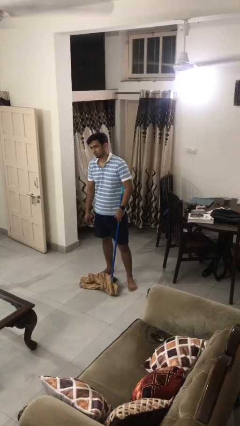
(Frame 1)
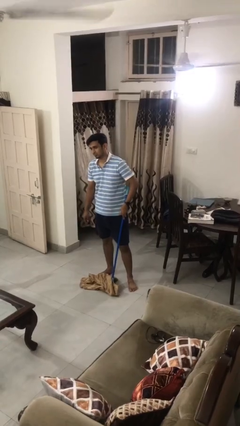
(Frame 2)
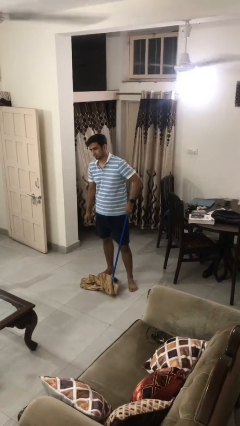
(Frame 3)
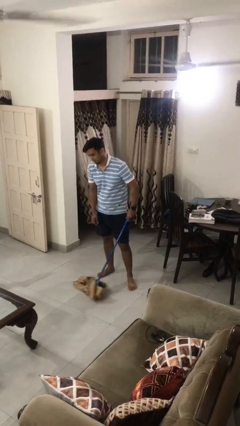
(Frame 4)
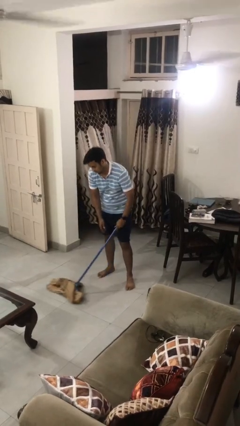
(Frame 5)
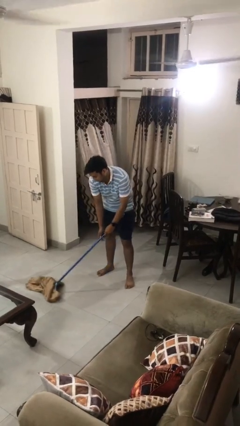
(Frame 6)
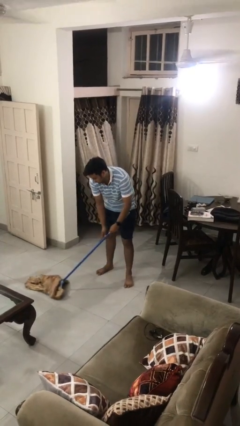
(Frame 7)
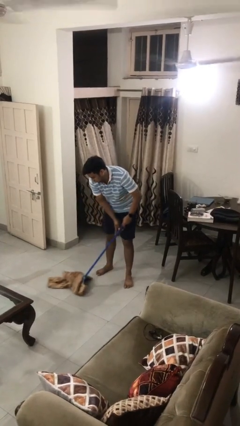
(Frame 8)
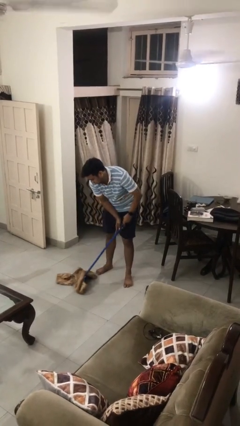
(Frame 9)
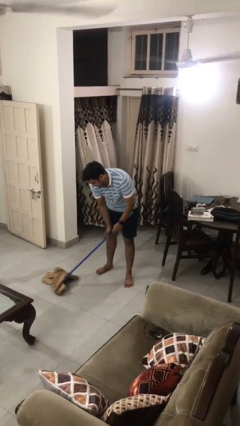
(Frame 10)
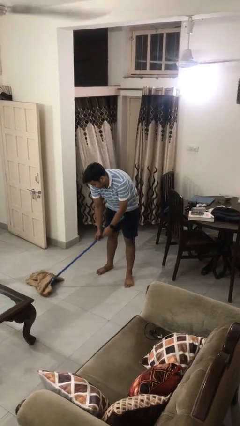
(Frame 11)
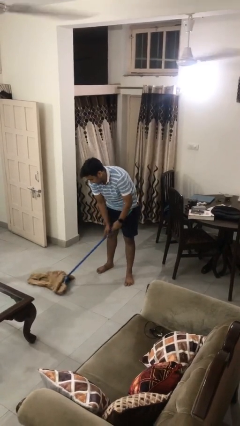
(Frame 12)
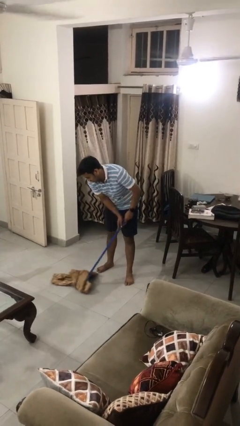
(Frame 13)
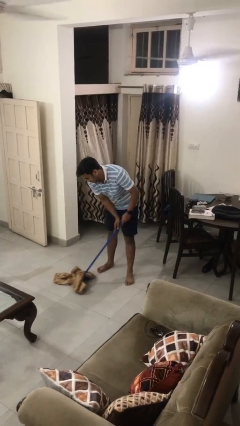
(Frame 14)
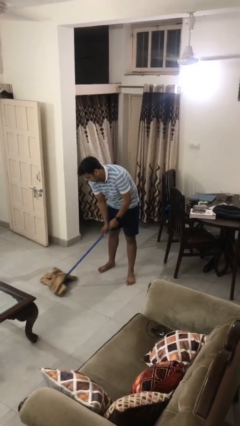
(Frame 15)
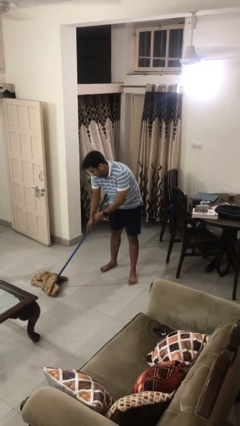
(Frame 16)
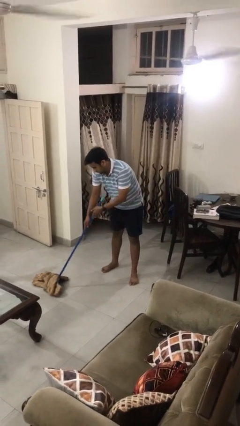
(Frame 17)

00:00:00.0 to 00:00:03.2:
person mops

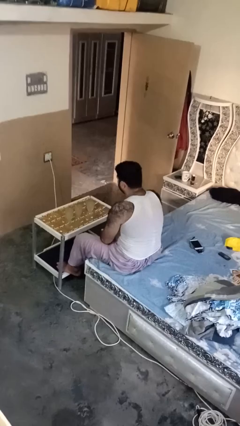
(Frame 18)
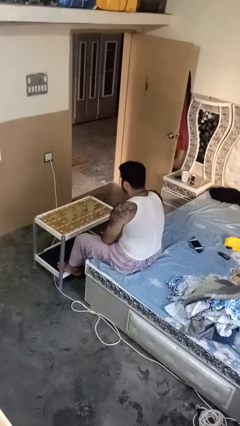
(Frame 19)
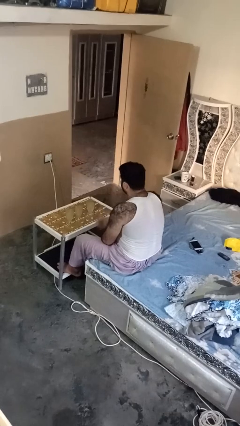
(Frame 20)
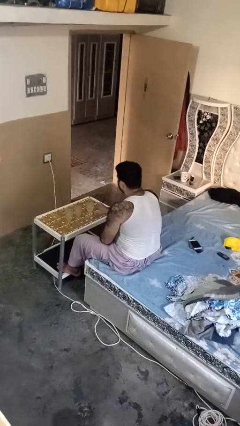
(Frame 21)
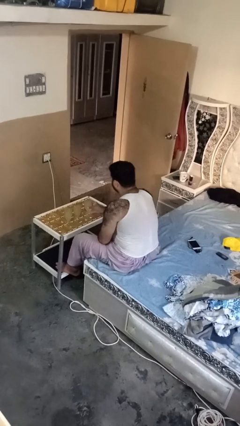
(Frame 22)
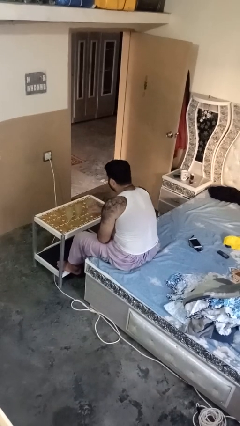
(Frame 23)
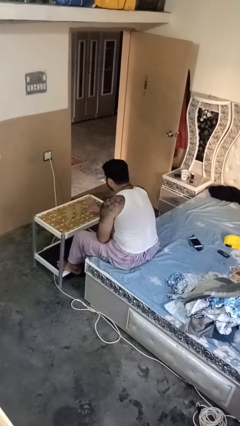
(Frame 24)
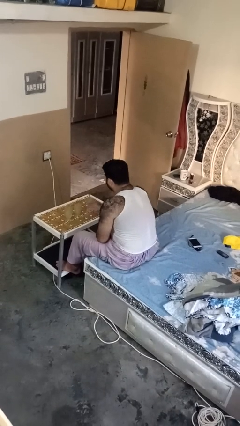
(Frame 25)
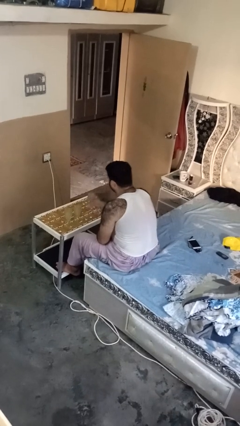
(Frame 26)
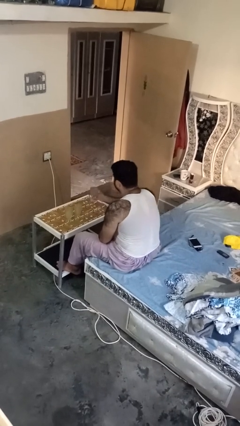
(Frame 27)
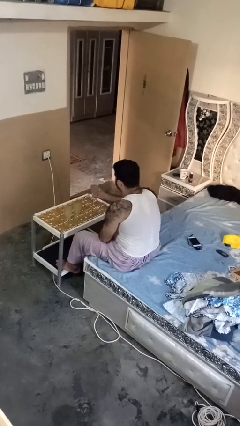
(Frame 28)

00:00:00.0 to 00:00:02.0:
person picks up object from table

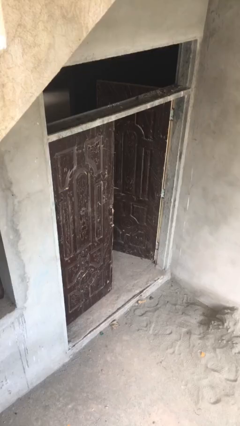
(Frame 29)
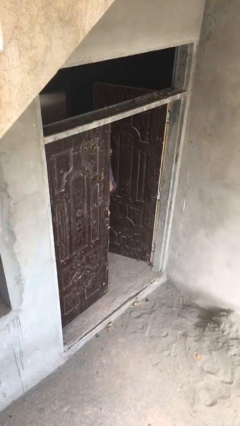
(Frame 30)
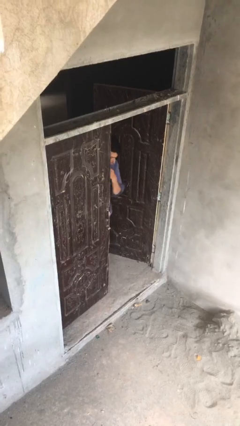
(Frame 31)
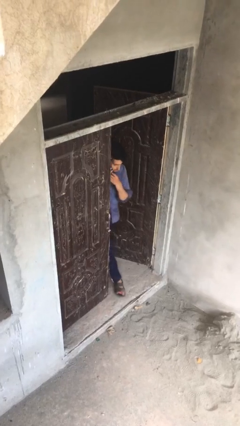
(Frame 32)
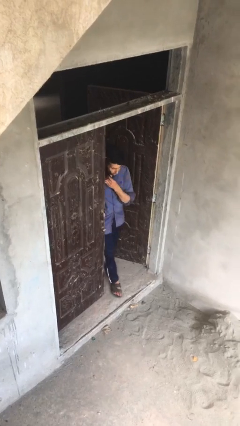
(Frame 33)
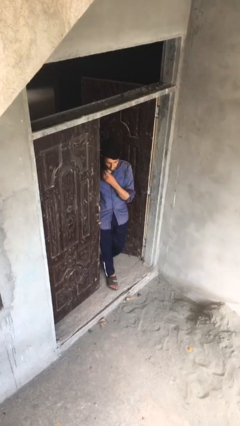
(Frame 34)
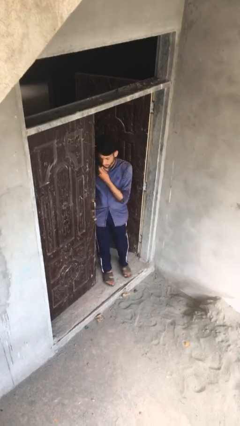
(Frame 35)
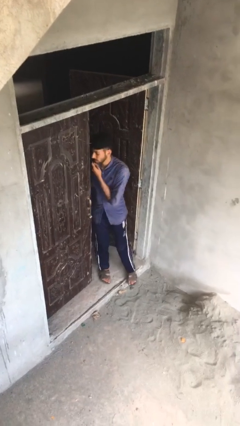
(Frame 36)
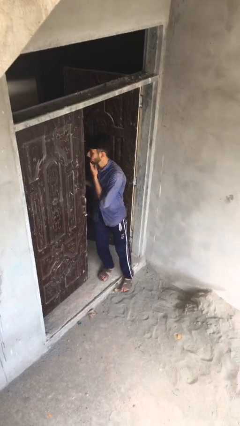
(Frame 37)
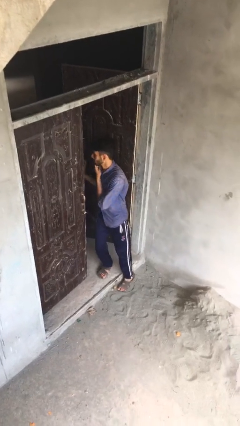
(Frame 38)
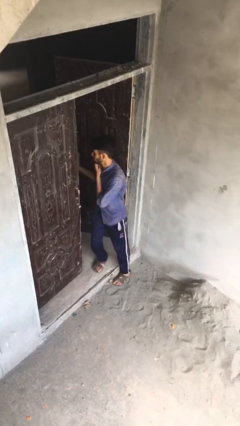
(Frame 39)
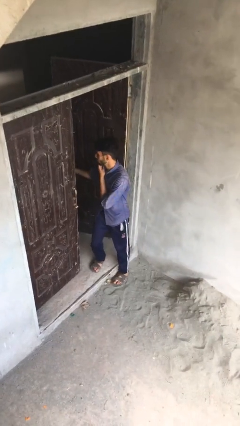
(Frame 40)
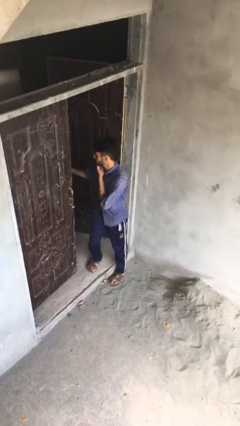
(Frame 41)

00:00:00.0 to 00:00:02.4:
person enters scene through structure

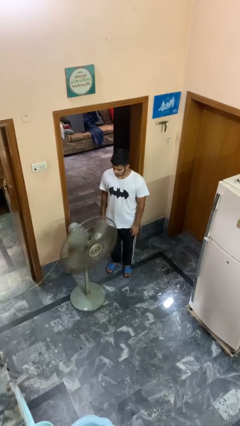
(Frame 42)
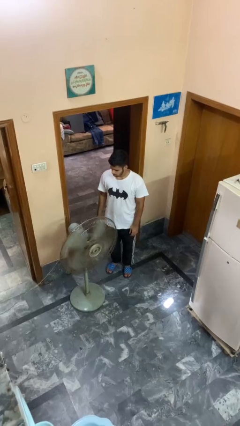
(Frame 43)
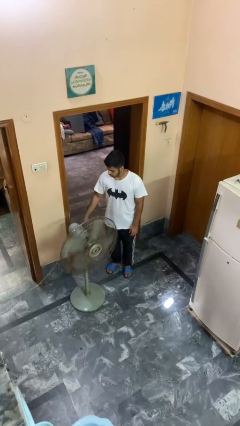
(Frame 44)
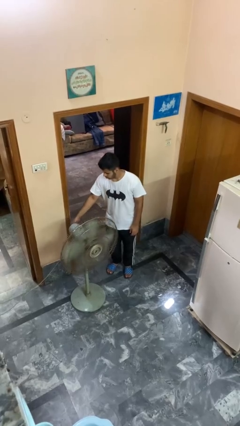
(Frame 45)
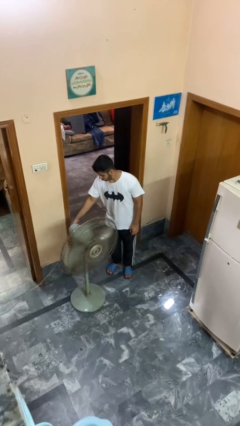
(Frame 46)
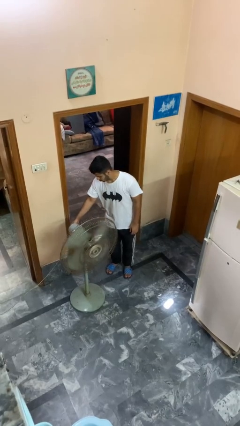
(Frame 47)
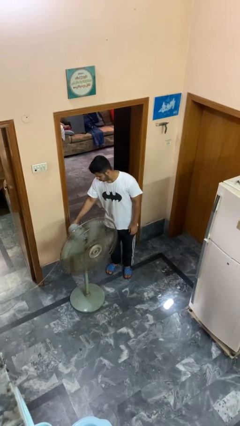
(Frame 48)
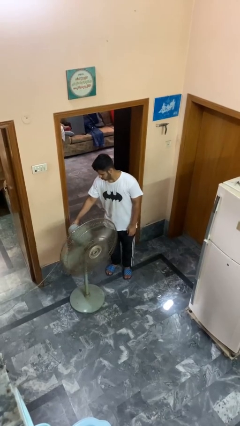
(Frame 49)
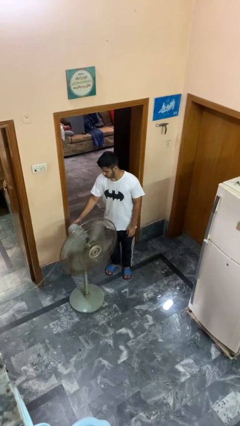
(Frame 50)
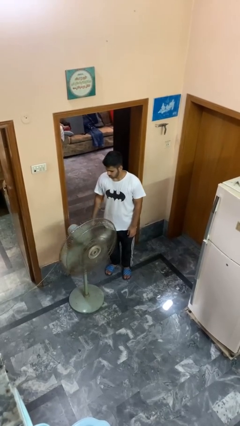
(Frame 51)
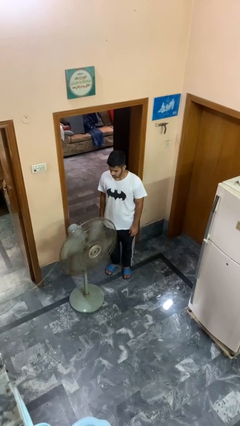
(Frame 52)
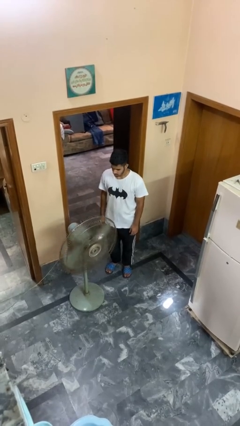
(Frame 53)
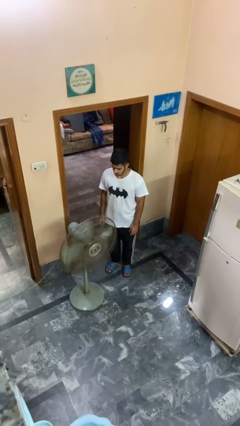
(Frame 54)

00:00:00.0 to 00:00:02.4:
person turns off fan

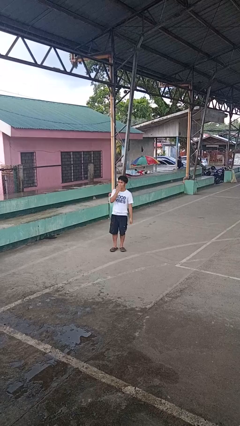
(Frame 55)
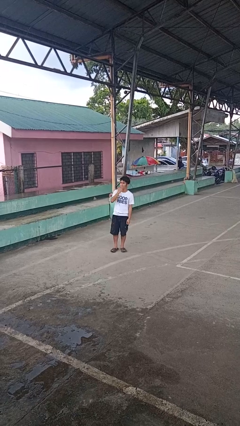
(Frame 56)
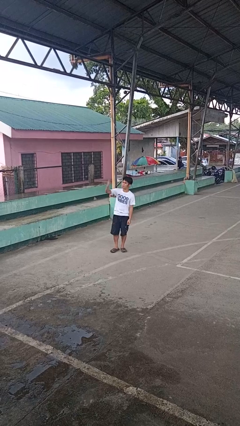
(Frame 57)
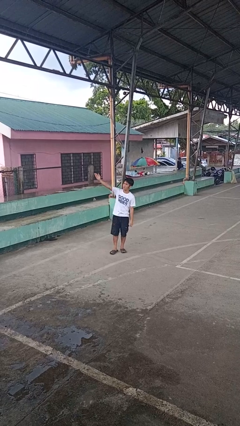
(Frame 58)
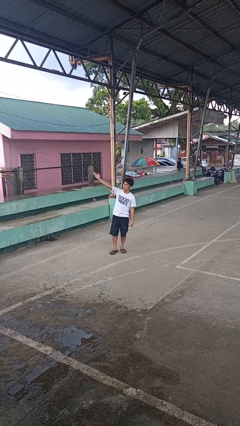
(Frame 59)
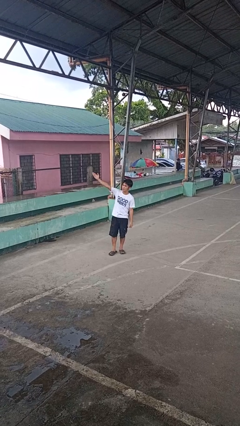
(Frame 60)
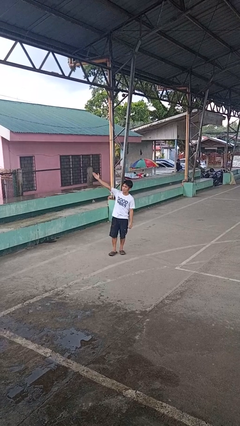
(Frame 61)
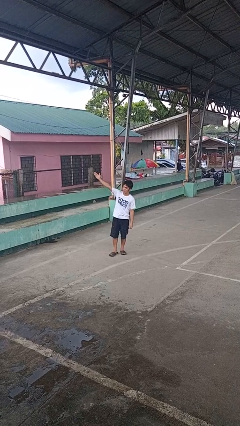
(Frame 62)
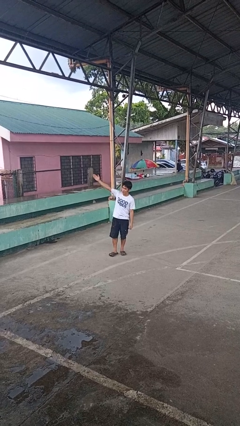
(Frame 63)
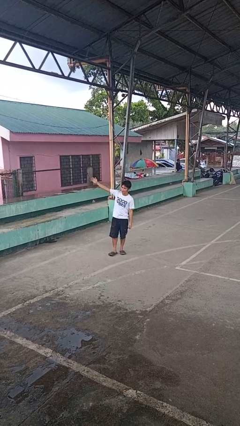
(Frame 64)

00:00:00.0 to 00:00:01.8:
person gestures blow kiss

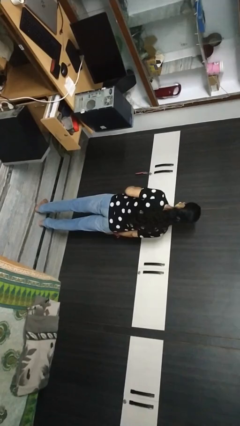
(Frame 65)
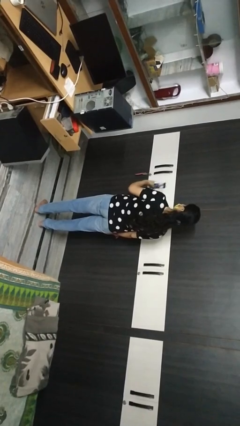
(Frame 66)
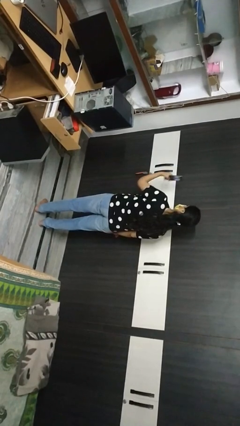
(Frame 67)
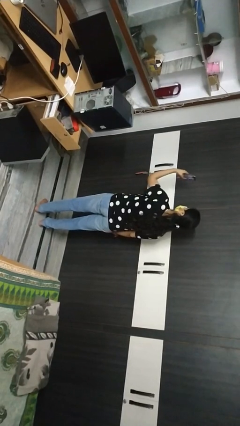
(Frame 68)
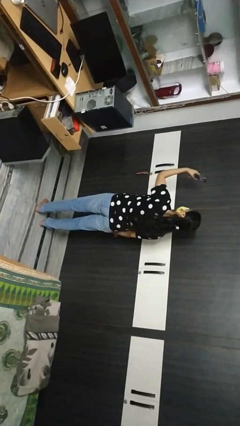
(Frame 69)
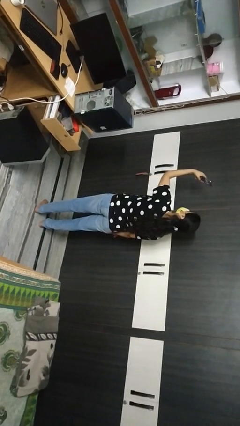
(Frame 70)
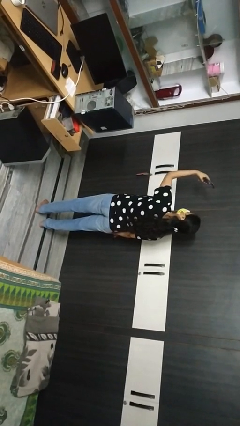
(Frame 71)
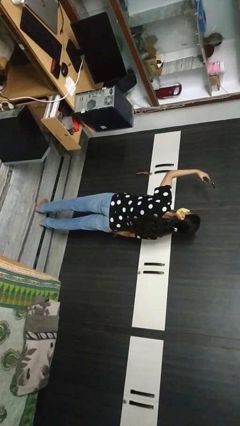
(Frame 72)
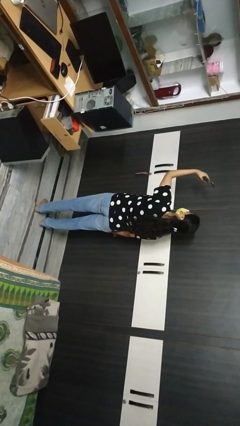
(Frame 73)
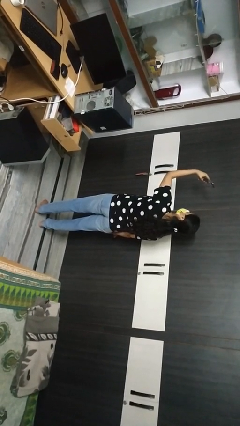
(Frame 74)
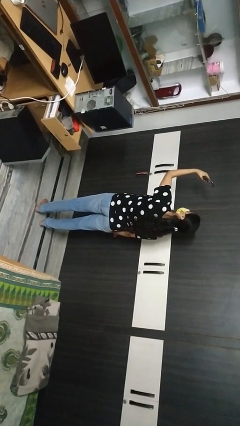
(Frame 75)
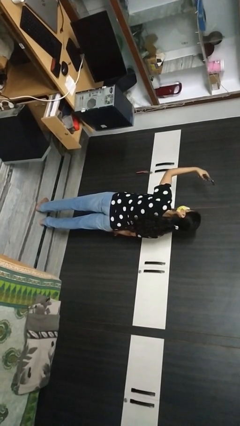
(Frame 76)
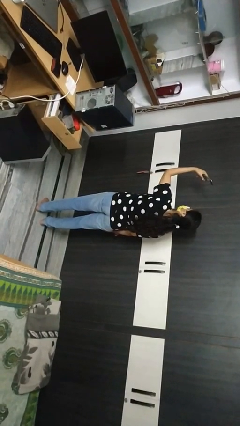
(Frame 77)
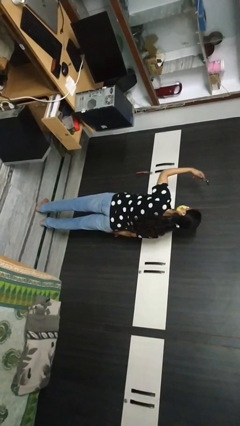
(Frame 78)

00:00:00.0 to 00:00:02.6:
person takes selfie

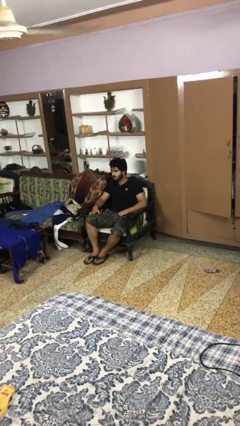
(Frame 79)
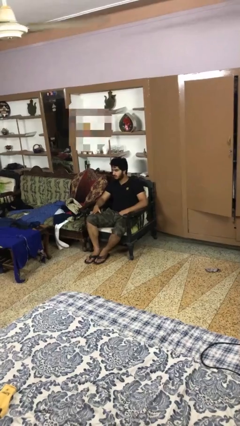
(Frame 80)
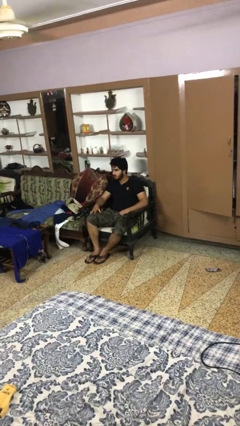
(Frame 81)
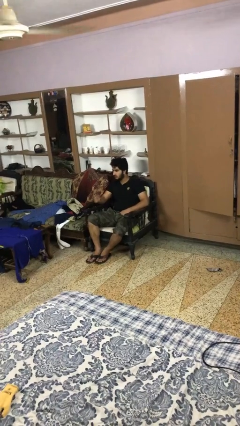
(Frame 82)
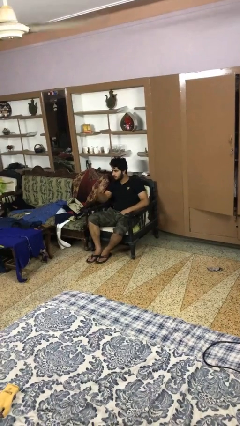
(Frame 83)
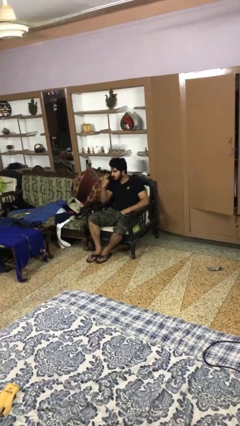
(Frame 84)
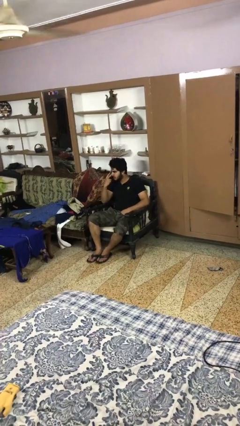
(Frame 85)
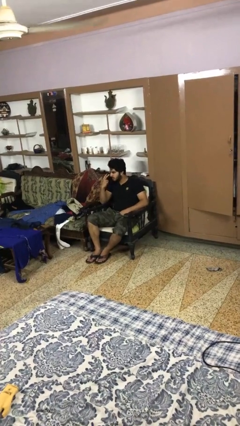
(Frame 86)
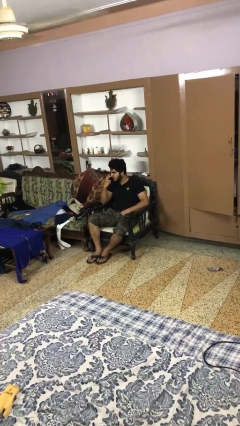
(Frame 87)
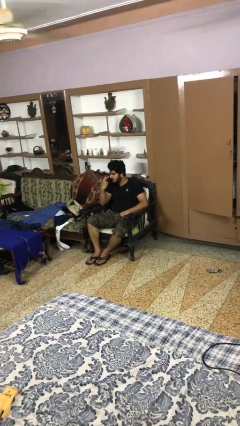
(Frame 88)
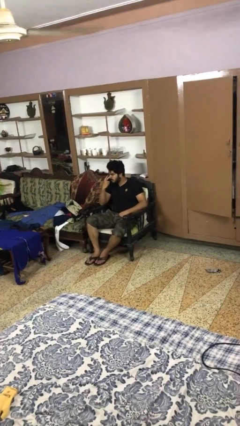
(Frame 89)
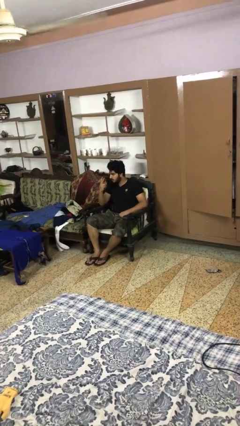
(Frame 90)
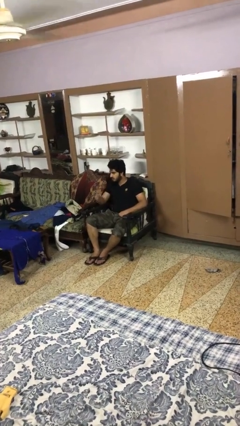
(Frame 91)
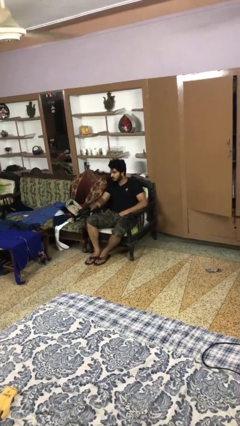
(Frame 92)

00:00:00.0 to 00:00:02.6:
person gestures watch closely
